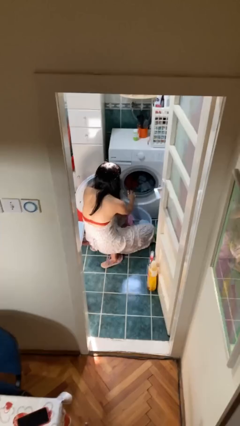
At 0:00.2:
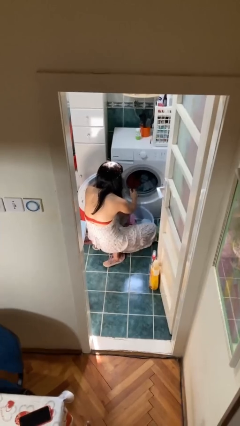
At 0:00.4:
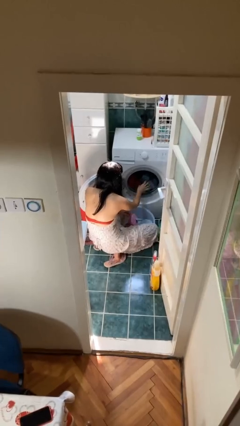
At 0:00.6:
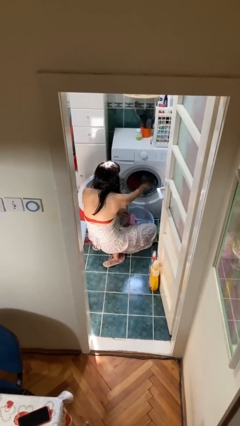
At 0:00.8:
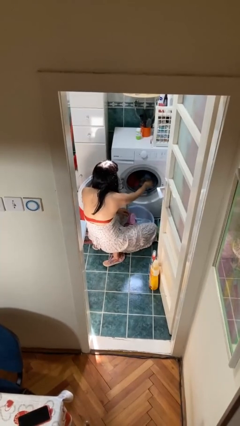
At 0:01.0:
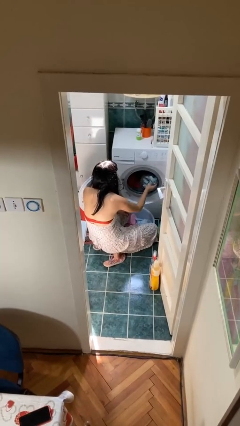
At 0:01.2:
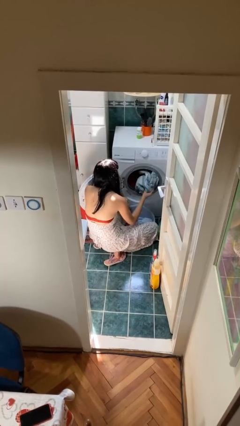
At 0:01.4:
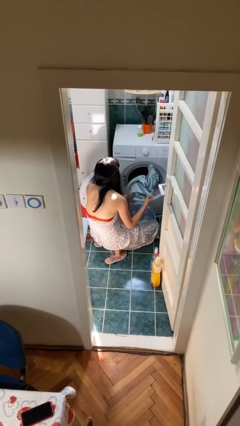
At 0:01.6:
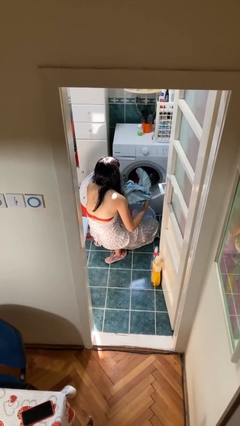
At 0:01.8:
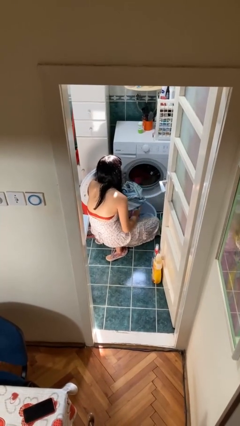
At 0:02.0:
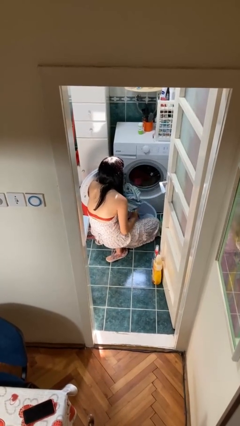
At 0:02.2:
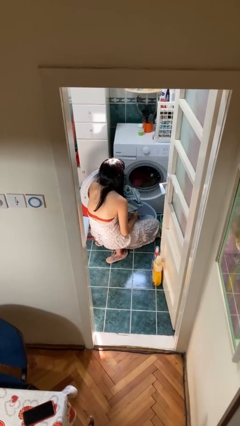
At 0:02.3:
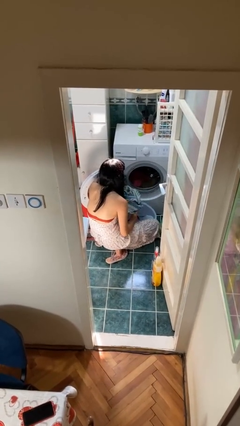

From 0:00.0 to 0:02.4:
person loads clotheswasher

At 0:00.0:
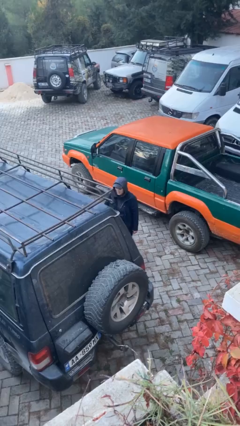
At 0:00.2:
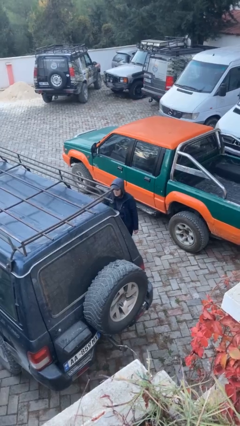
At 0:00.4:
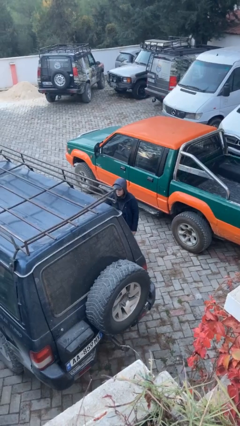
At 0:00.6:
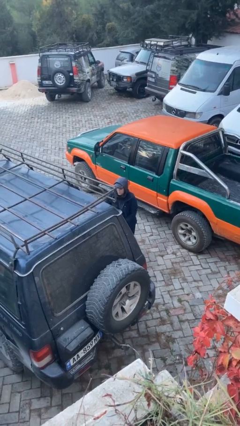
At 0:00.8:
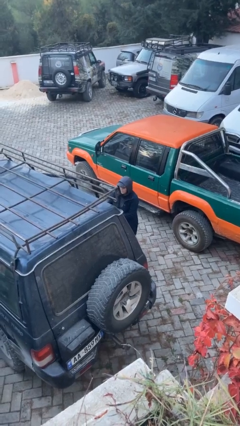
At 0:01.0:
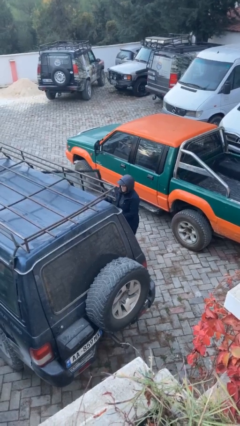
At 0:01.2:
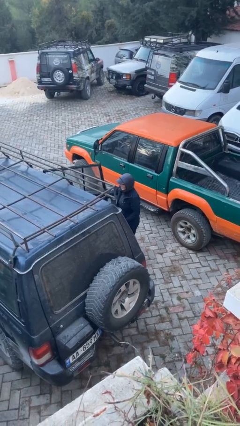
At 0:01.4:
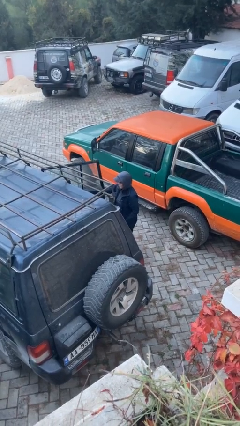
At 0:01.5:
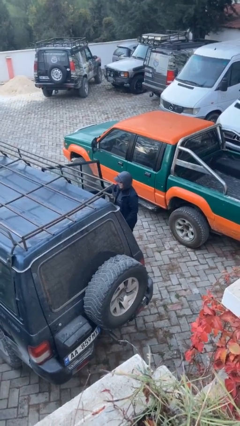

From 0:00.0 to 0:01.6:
person opens car door

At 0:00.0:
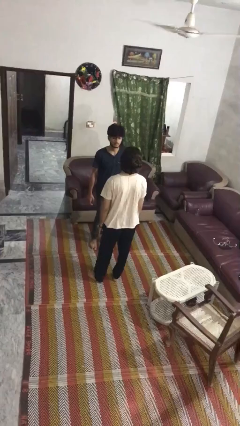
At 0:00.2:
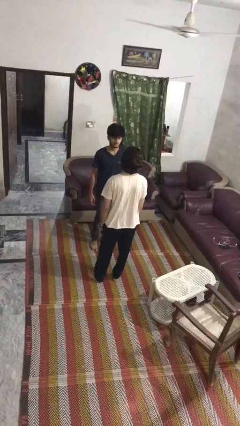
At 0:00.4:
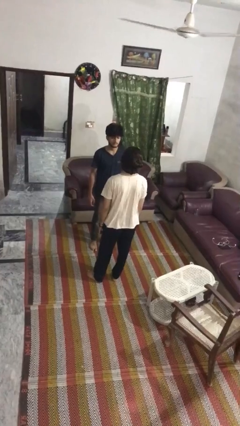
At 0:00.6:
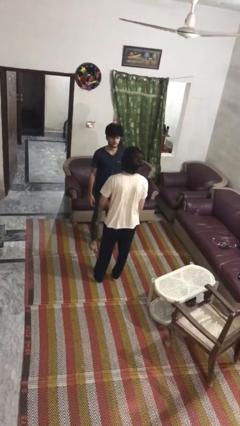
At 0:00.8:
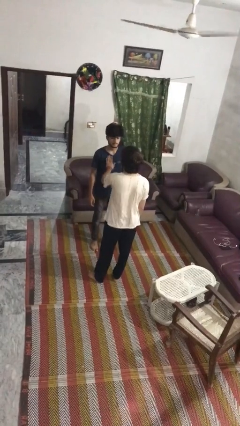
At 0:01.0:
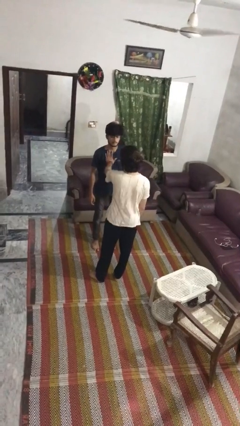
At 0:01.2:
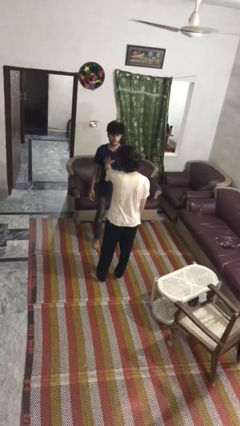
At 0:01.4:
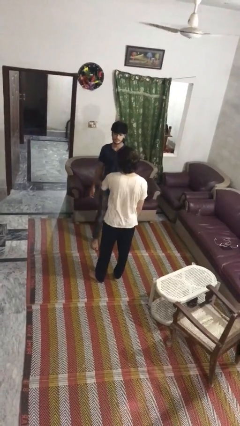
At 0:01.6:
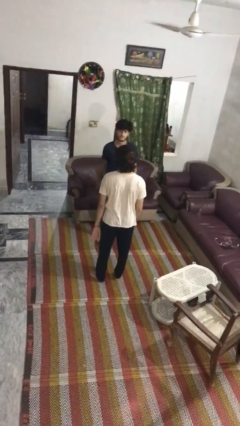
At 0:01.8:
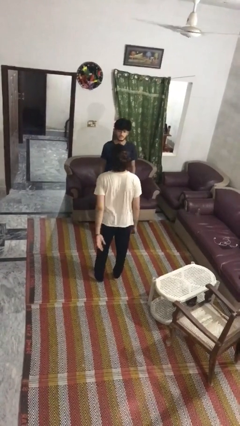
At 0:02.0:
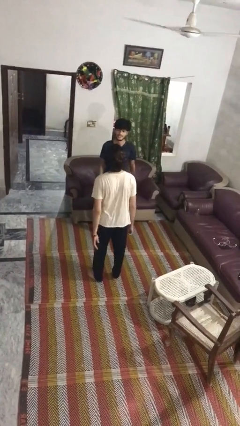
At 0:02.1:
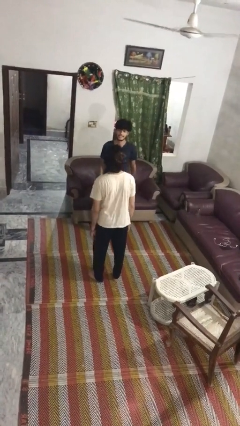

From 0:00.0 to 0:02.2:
person shoves person

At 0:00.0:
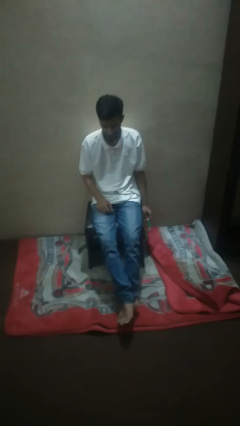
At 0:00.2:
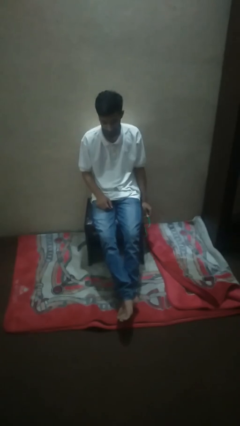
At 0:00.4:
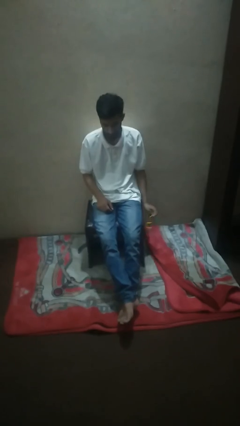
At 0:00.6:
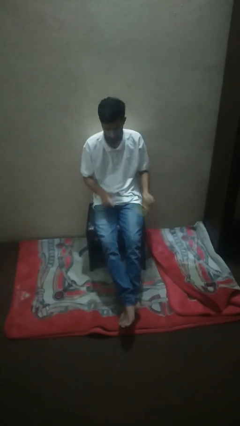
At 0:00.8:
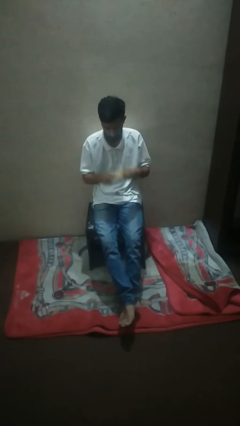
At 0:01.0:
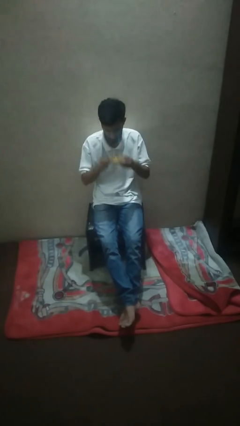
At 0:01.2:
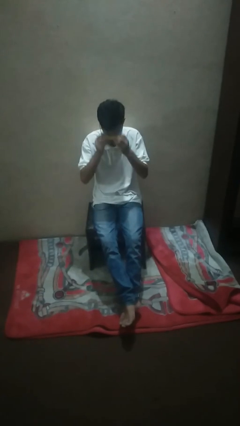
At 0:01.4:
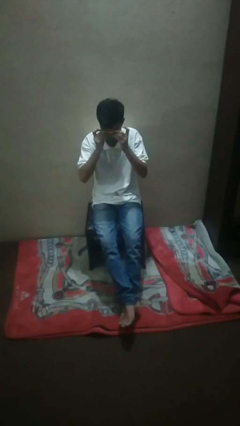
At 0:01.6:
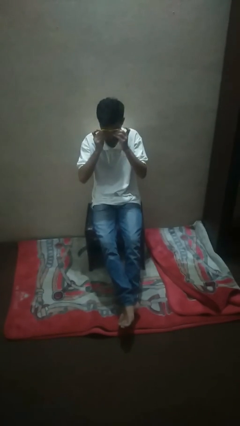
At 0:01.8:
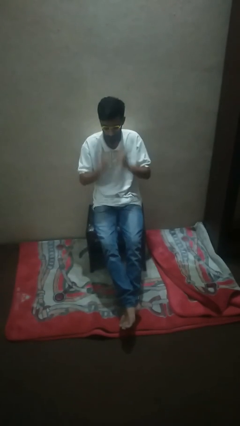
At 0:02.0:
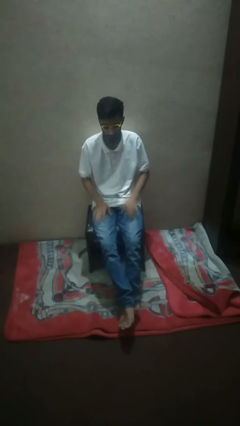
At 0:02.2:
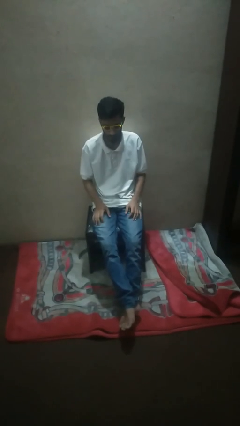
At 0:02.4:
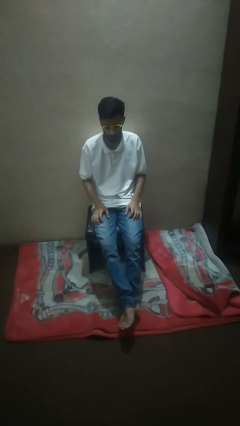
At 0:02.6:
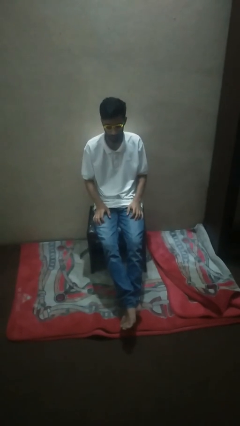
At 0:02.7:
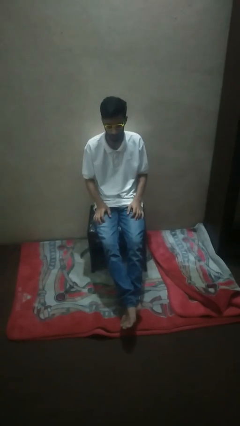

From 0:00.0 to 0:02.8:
person puts on sunglasses

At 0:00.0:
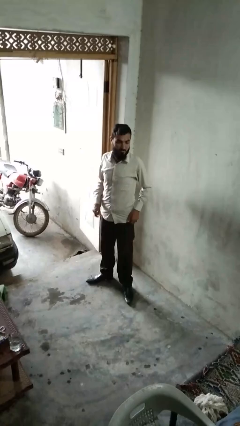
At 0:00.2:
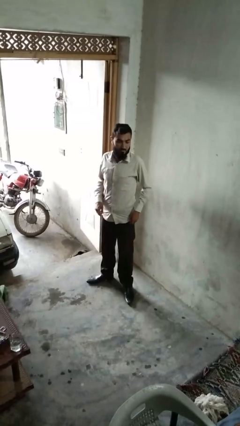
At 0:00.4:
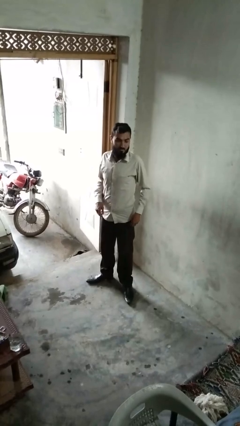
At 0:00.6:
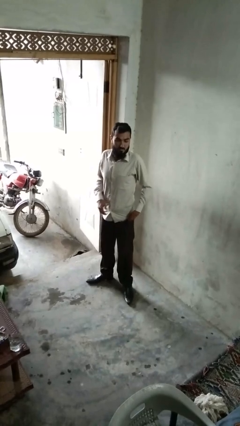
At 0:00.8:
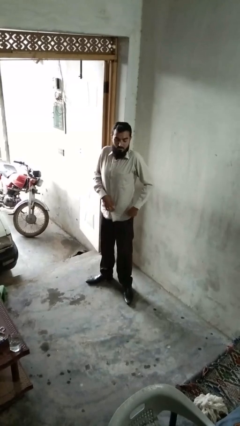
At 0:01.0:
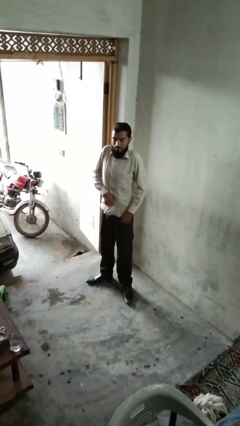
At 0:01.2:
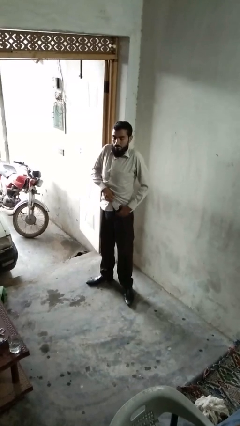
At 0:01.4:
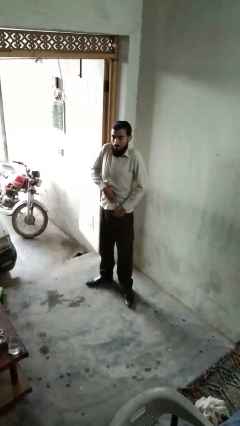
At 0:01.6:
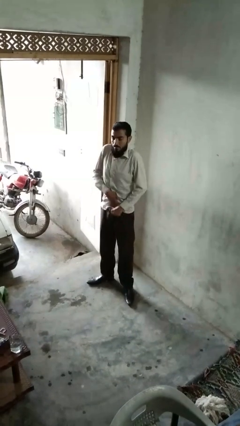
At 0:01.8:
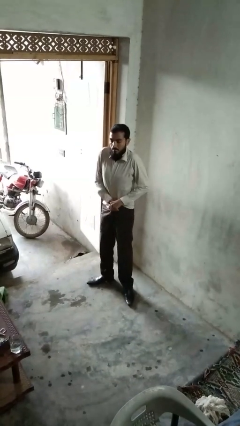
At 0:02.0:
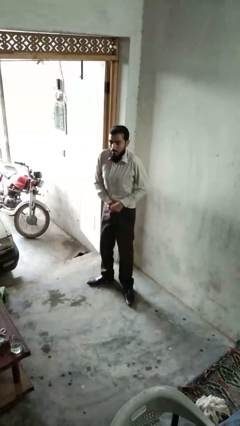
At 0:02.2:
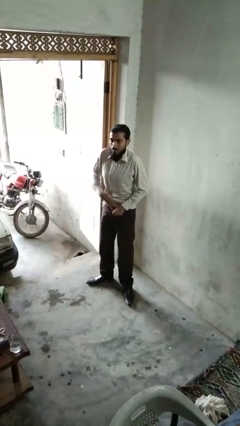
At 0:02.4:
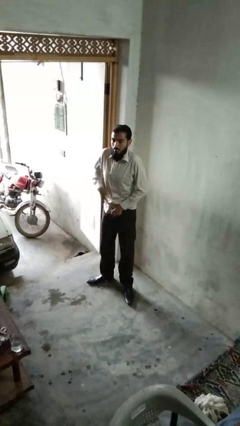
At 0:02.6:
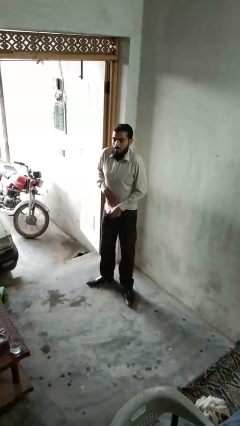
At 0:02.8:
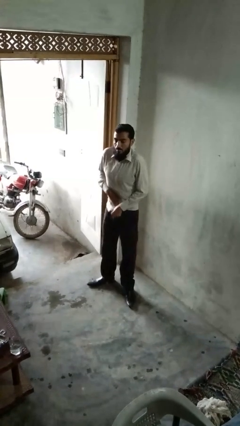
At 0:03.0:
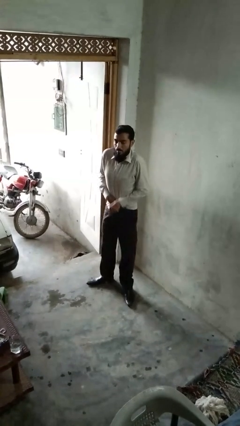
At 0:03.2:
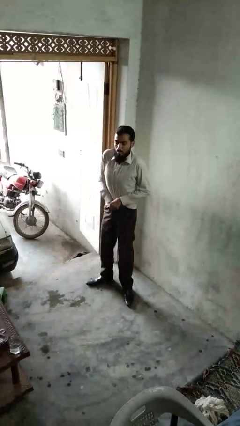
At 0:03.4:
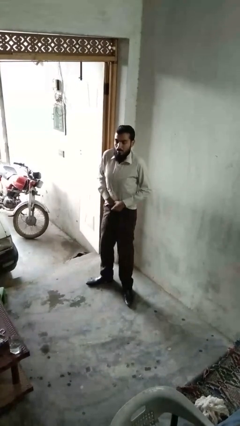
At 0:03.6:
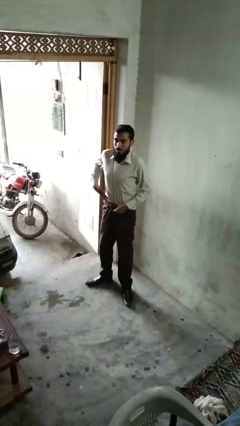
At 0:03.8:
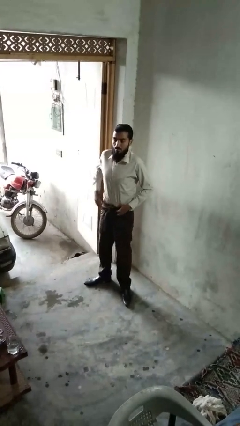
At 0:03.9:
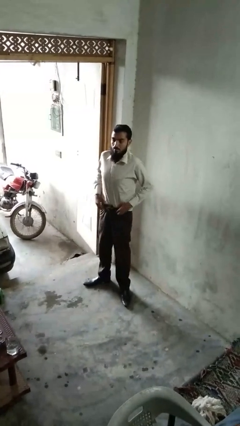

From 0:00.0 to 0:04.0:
person tucks in shirt

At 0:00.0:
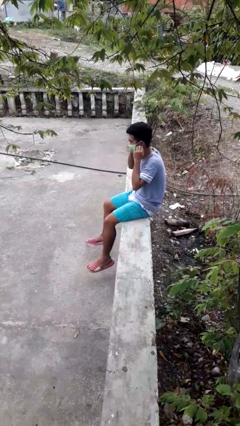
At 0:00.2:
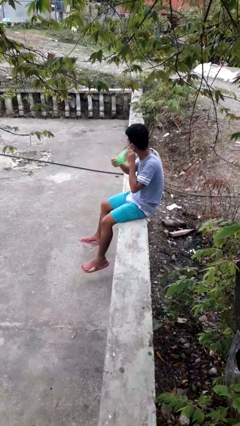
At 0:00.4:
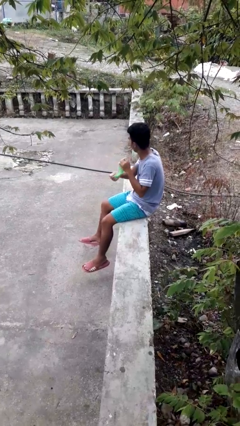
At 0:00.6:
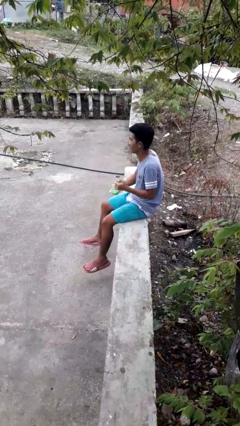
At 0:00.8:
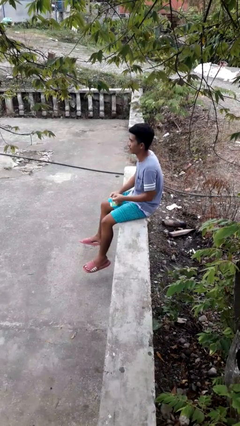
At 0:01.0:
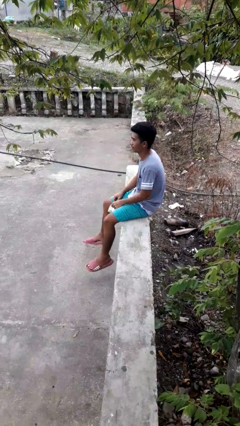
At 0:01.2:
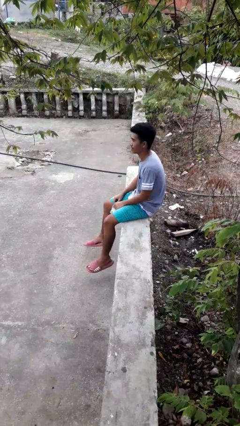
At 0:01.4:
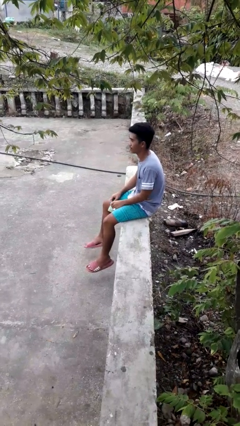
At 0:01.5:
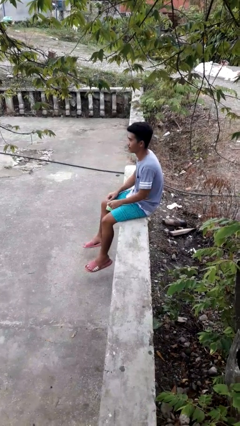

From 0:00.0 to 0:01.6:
person takes off facemask

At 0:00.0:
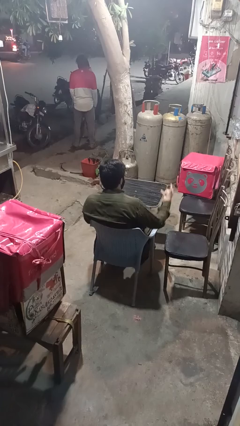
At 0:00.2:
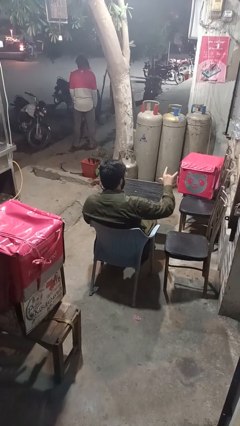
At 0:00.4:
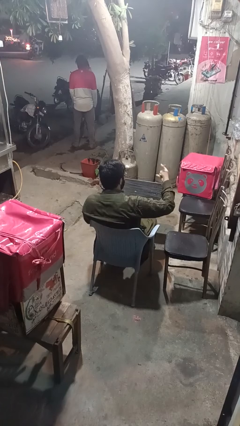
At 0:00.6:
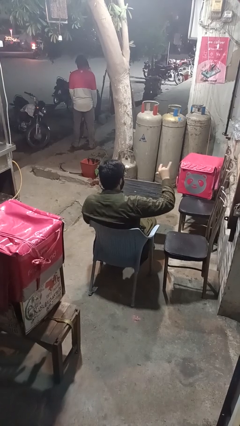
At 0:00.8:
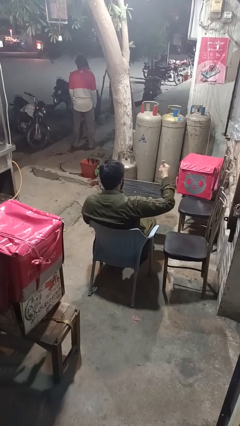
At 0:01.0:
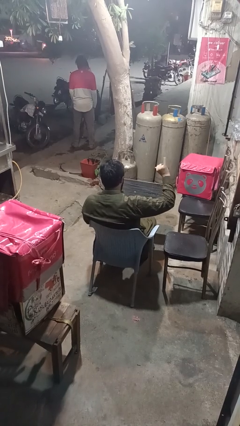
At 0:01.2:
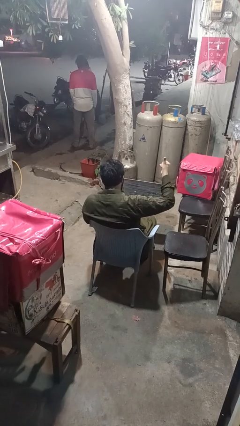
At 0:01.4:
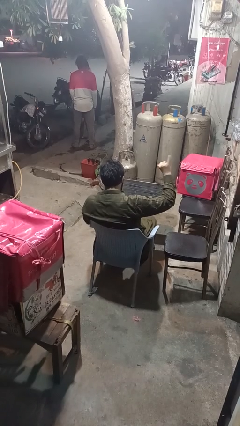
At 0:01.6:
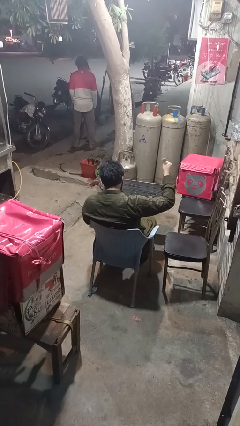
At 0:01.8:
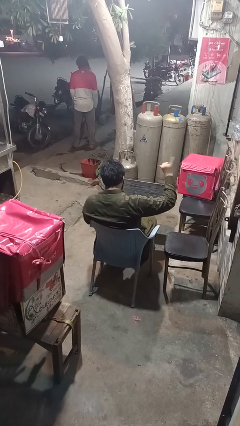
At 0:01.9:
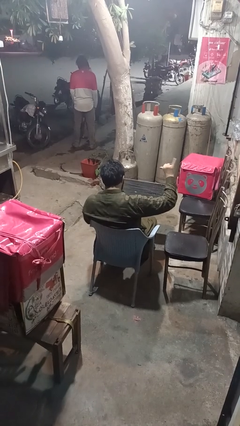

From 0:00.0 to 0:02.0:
person gestures hang loose

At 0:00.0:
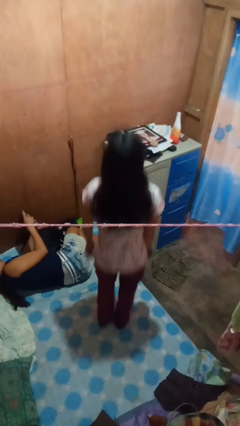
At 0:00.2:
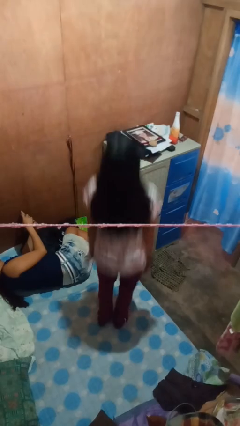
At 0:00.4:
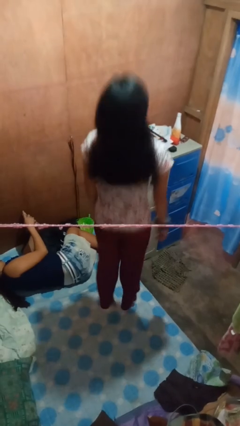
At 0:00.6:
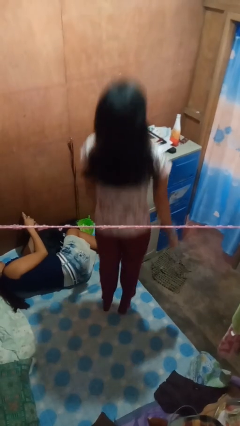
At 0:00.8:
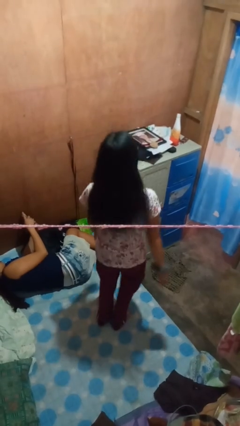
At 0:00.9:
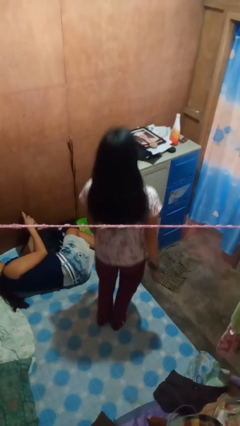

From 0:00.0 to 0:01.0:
person jumps on bed
